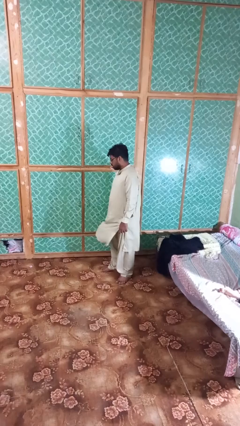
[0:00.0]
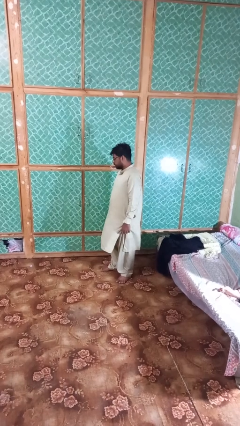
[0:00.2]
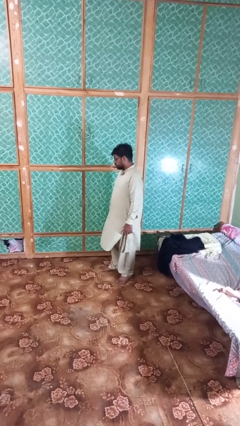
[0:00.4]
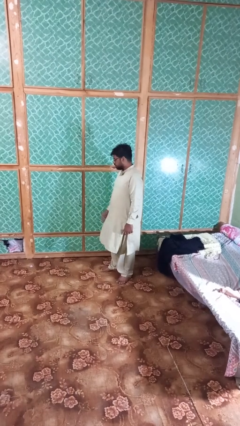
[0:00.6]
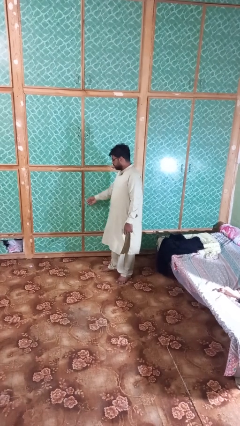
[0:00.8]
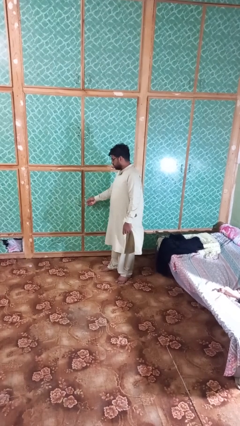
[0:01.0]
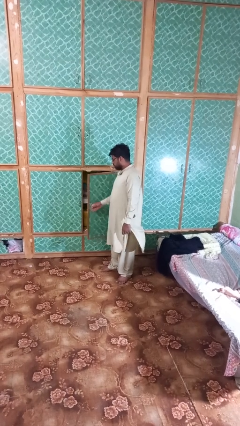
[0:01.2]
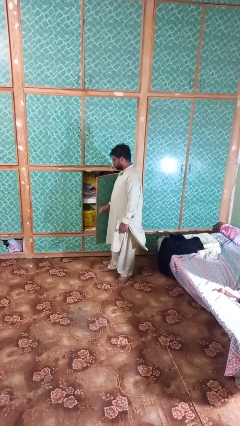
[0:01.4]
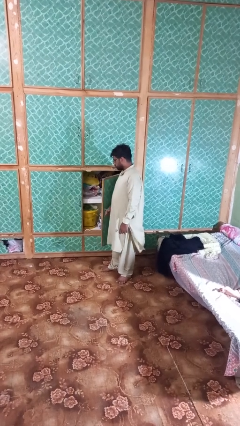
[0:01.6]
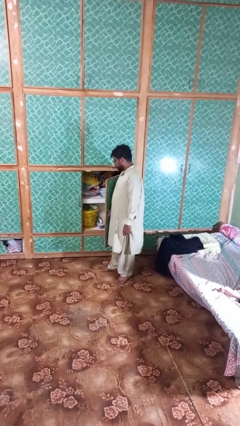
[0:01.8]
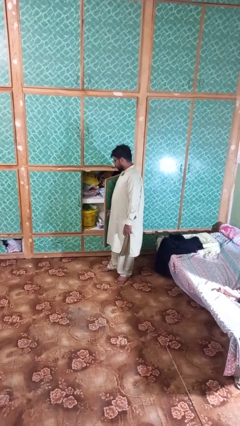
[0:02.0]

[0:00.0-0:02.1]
person opens closet door

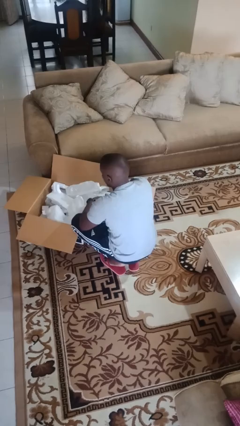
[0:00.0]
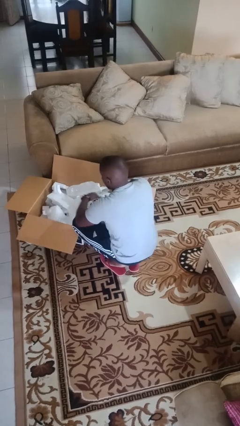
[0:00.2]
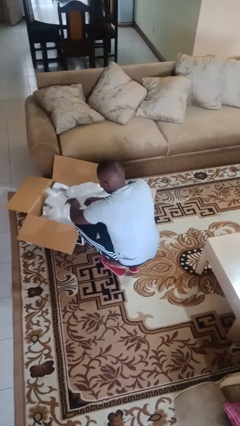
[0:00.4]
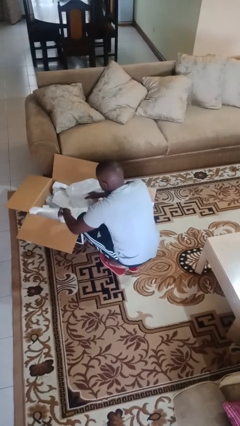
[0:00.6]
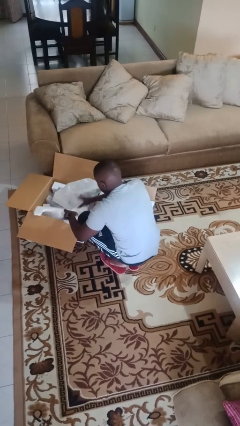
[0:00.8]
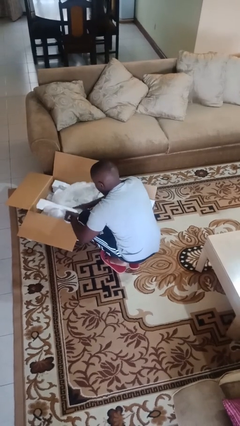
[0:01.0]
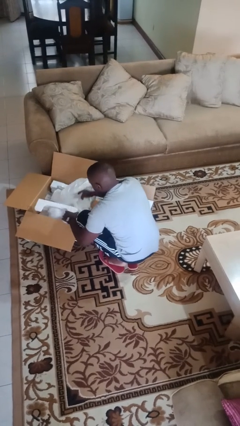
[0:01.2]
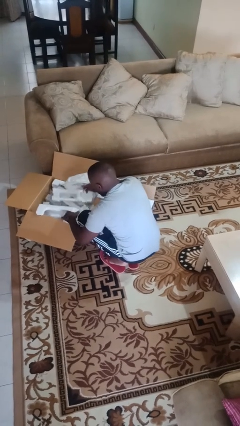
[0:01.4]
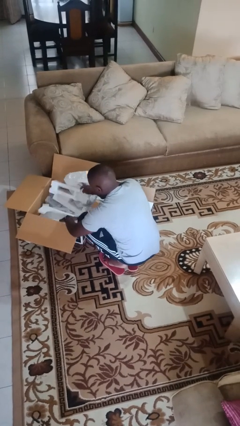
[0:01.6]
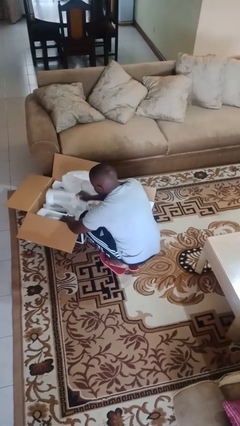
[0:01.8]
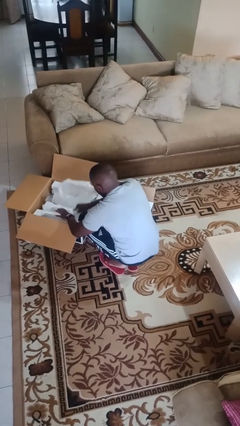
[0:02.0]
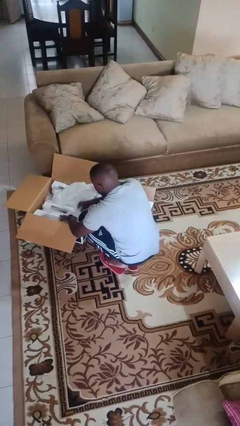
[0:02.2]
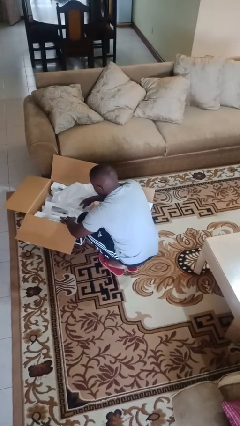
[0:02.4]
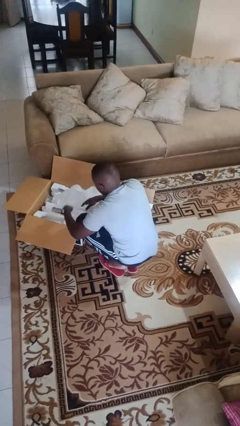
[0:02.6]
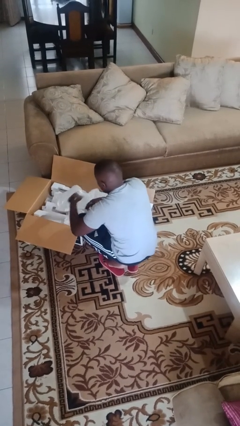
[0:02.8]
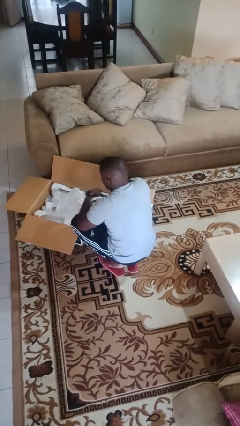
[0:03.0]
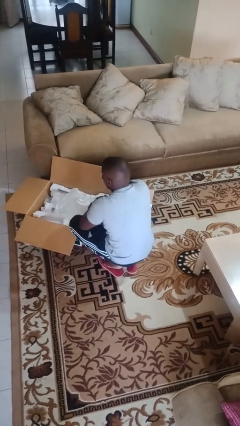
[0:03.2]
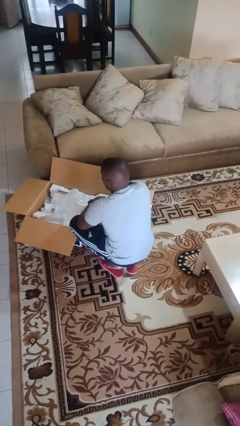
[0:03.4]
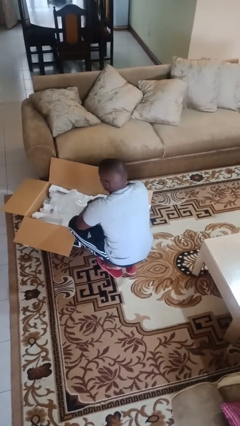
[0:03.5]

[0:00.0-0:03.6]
person searches in box

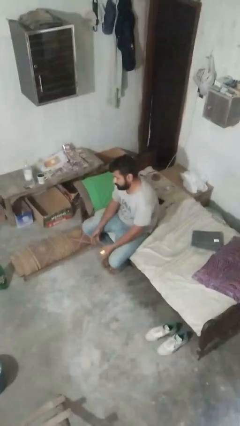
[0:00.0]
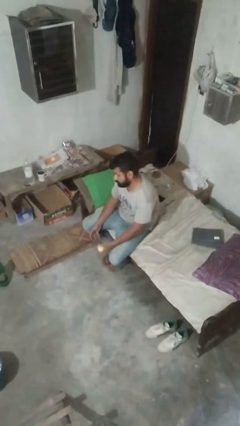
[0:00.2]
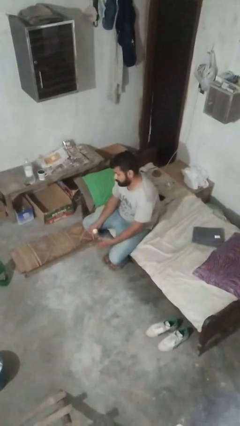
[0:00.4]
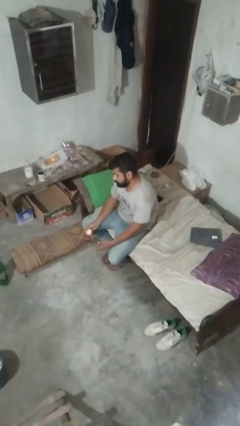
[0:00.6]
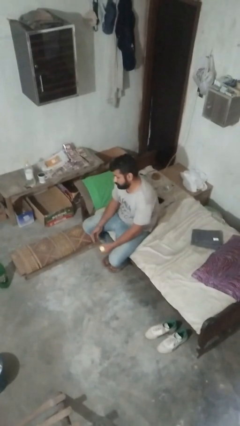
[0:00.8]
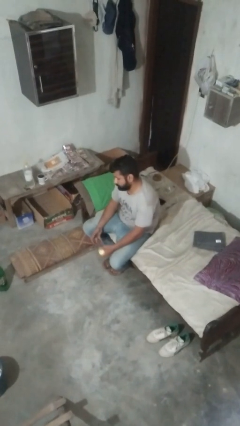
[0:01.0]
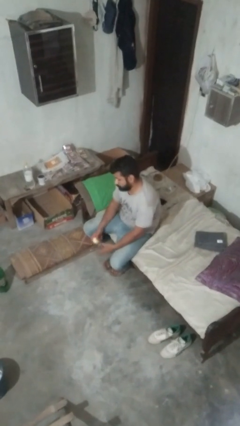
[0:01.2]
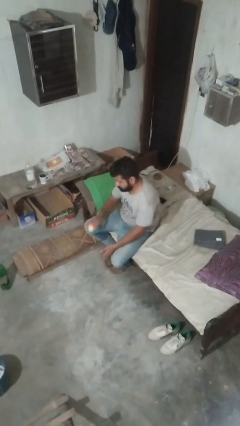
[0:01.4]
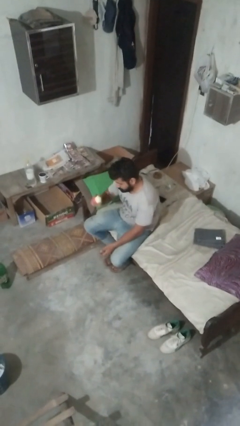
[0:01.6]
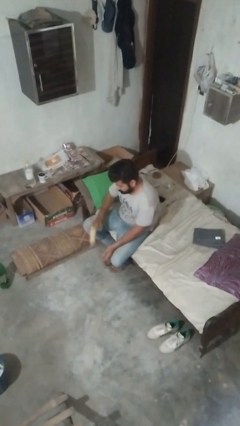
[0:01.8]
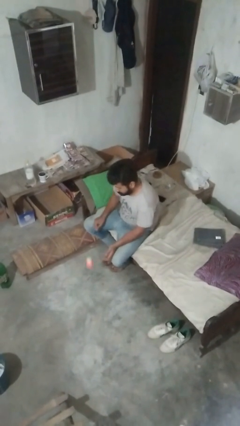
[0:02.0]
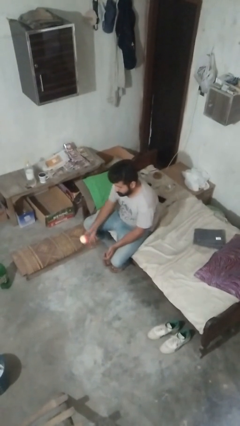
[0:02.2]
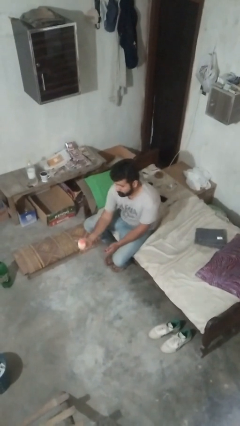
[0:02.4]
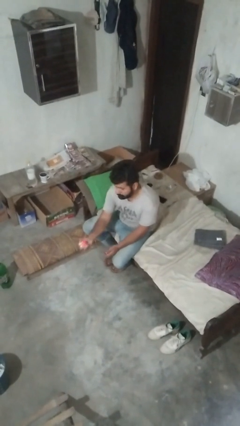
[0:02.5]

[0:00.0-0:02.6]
person bounces ball on floor

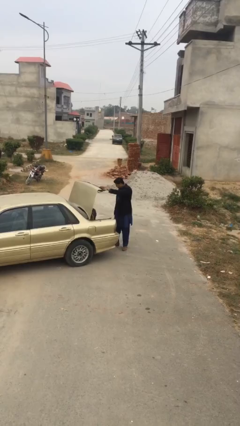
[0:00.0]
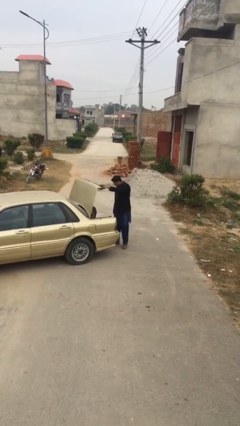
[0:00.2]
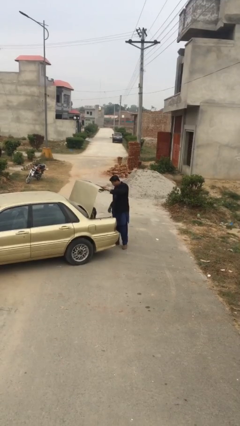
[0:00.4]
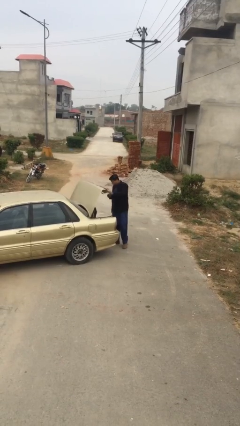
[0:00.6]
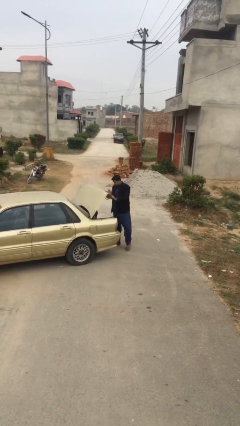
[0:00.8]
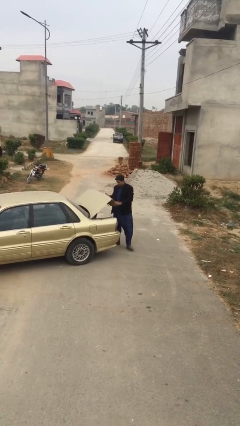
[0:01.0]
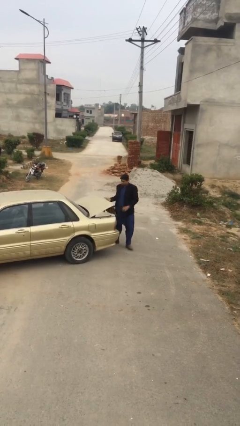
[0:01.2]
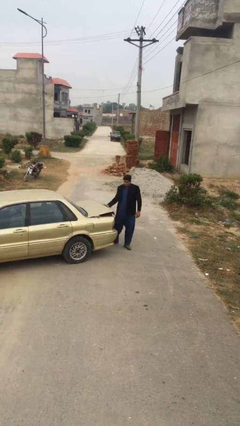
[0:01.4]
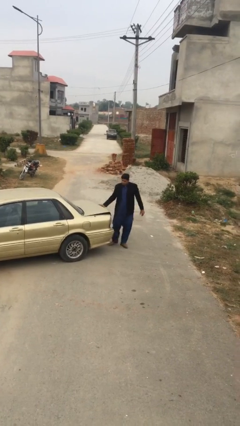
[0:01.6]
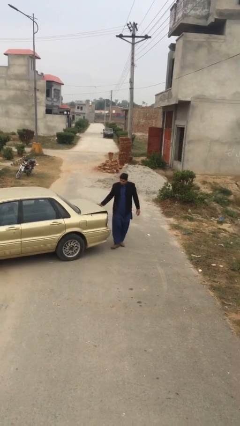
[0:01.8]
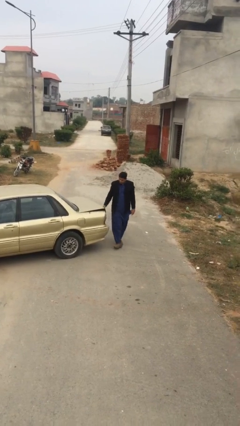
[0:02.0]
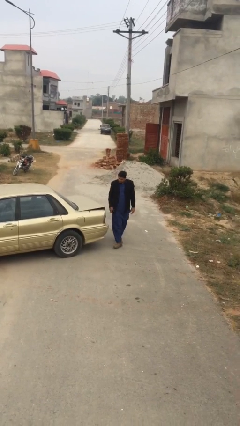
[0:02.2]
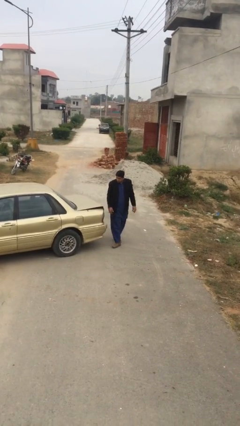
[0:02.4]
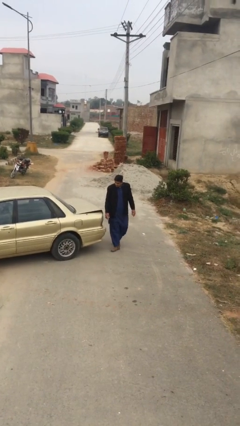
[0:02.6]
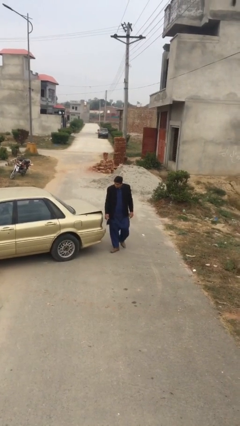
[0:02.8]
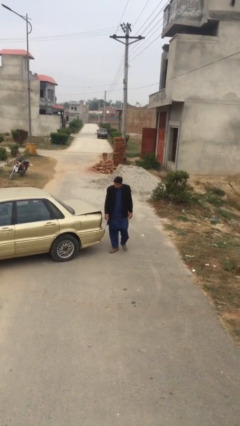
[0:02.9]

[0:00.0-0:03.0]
person closes car trunk

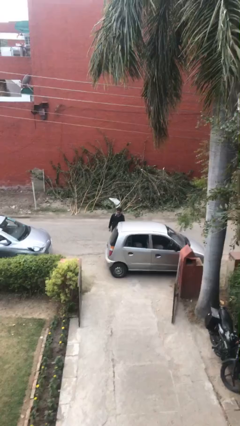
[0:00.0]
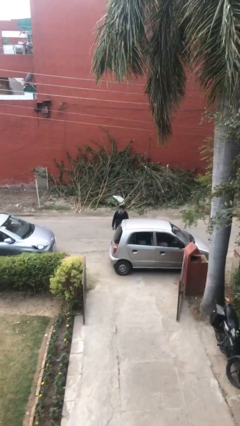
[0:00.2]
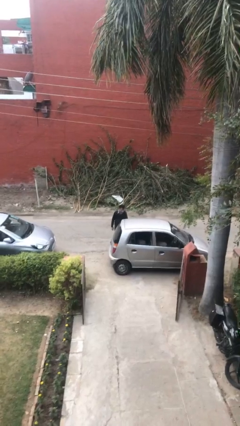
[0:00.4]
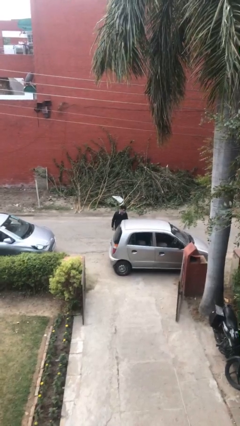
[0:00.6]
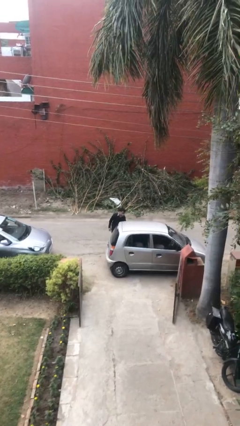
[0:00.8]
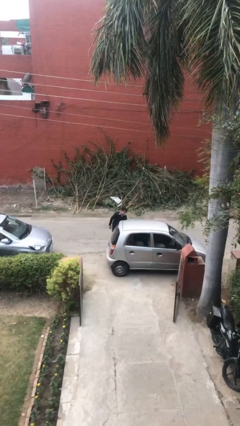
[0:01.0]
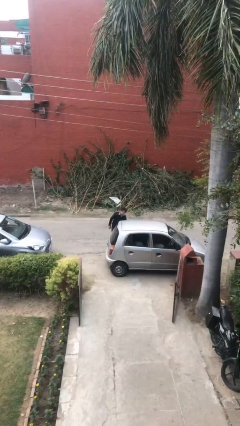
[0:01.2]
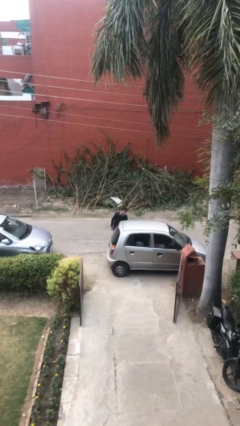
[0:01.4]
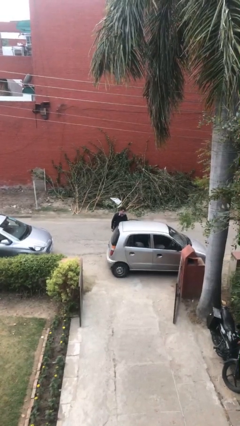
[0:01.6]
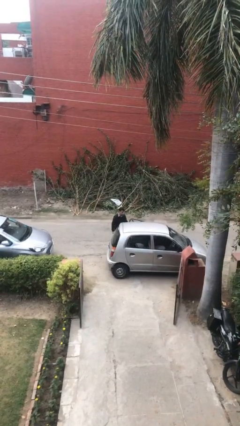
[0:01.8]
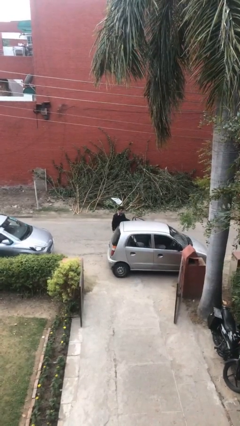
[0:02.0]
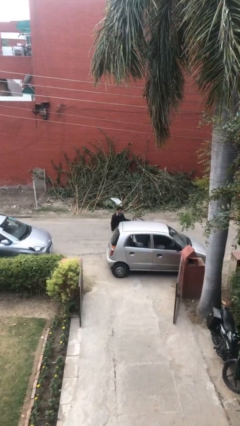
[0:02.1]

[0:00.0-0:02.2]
person opens car door

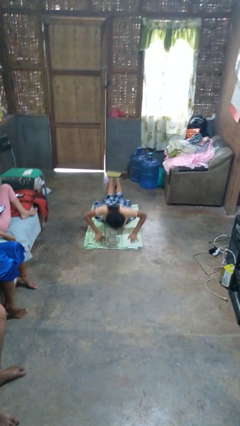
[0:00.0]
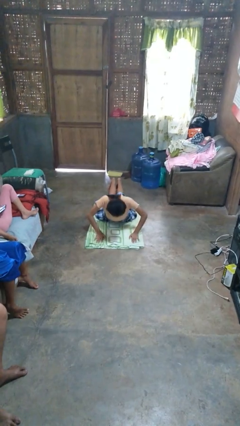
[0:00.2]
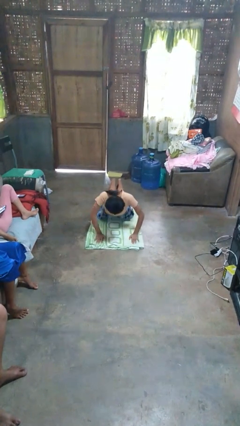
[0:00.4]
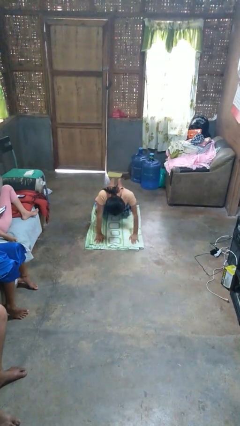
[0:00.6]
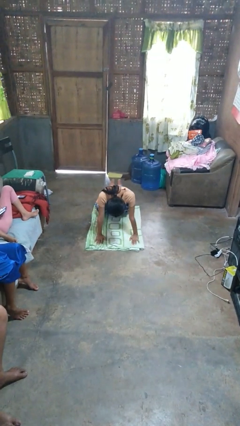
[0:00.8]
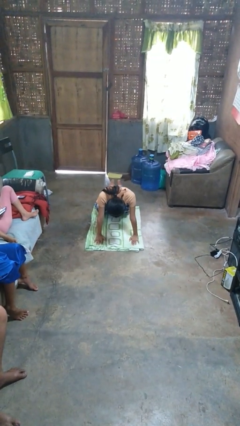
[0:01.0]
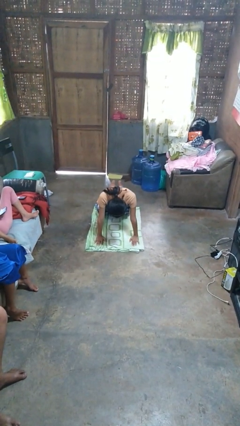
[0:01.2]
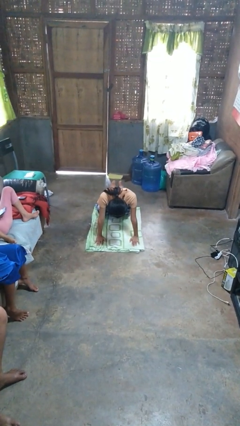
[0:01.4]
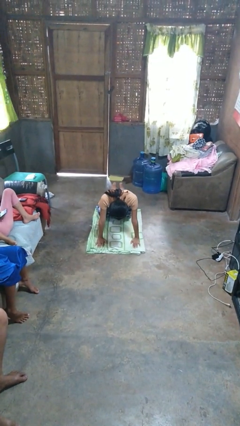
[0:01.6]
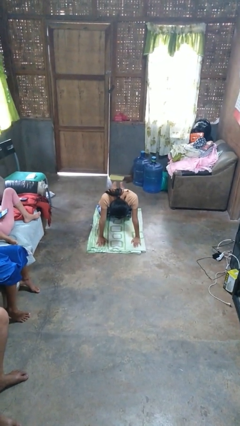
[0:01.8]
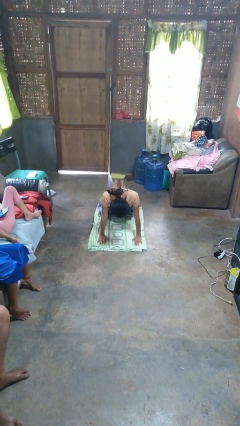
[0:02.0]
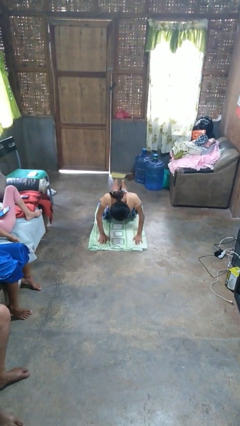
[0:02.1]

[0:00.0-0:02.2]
person exercises with pushup

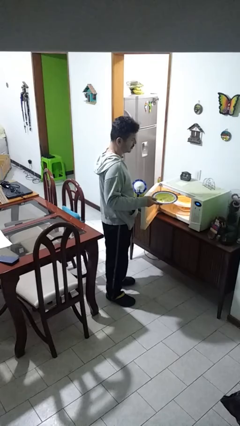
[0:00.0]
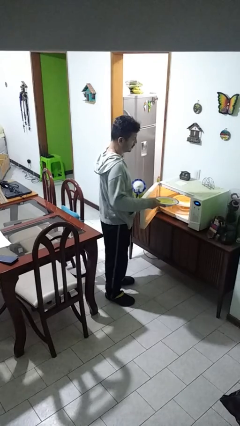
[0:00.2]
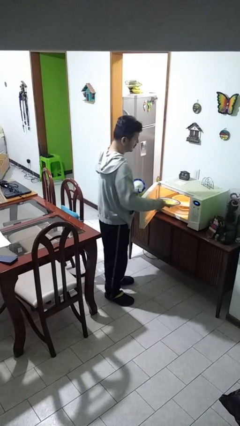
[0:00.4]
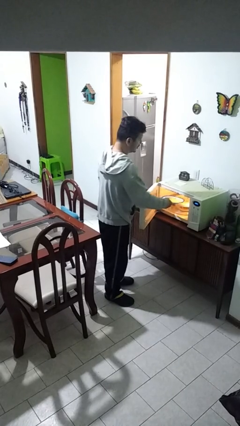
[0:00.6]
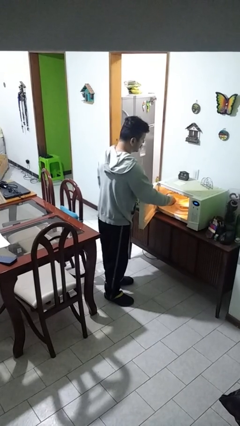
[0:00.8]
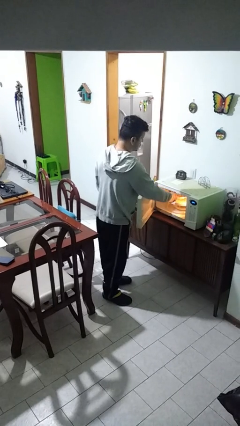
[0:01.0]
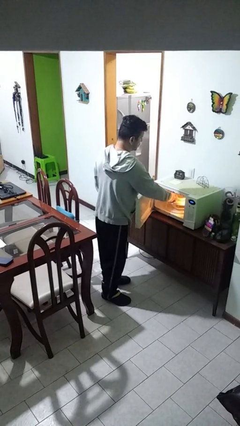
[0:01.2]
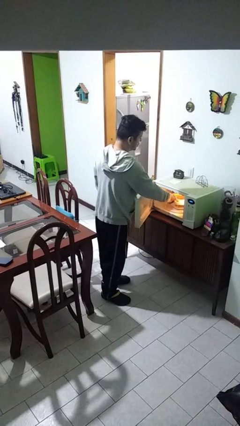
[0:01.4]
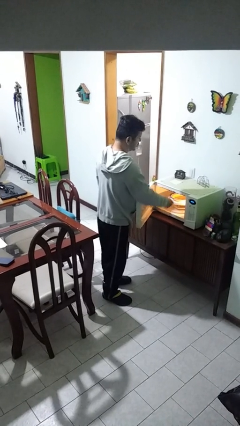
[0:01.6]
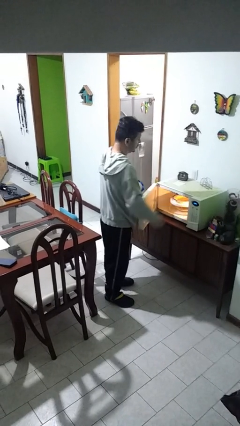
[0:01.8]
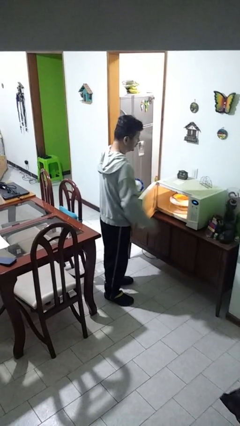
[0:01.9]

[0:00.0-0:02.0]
person puts object into microwave
